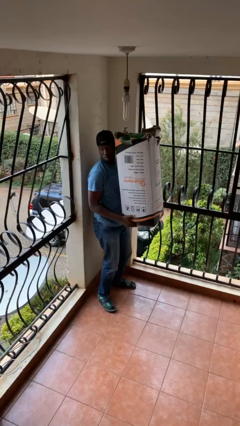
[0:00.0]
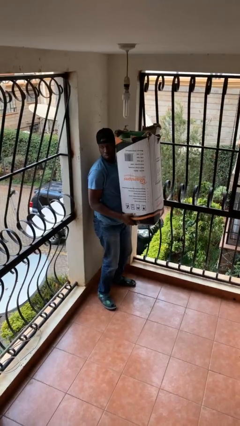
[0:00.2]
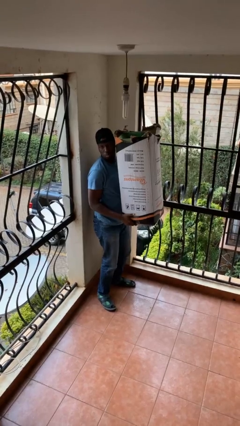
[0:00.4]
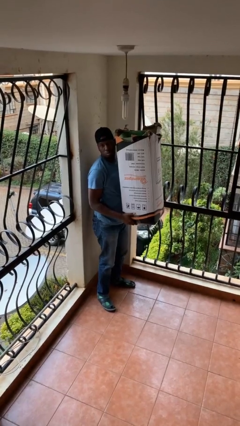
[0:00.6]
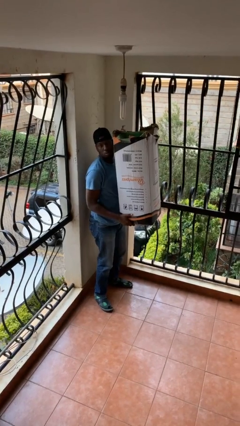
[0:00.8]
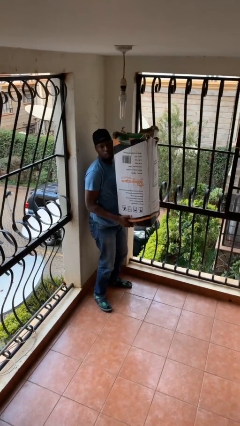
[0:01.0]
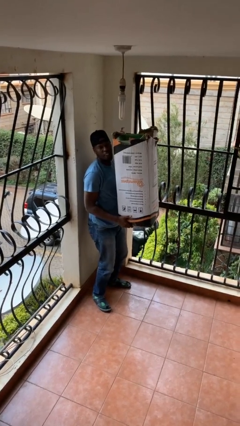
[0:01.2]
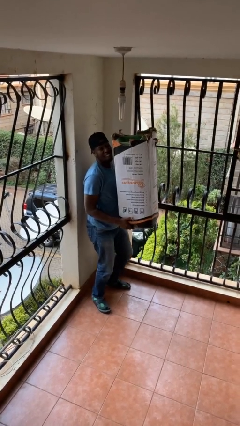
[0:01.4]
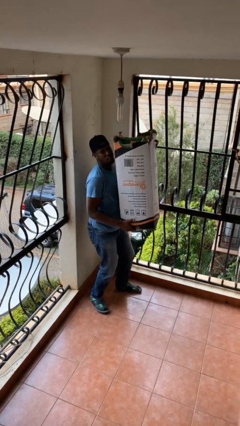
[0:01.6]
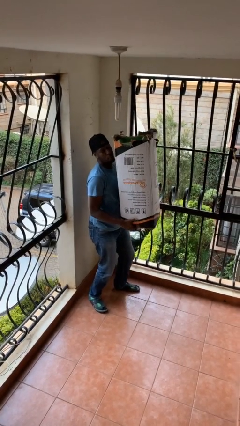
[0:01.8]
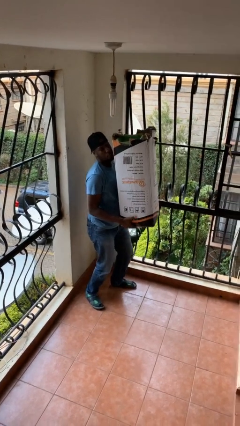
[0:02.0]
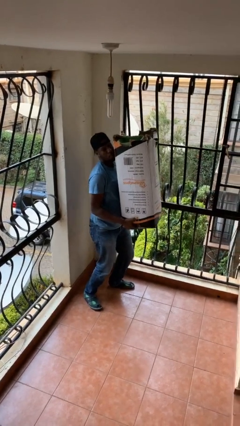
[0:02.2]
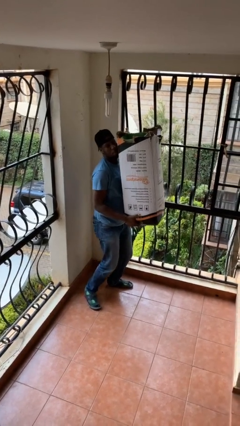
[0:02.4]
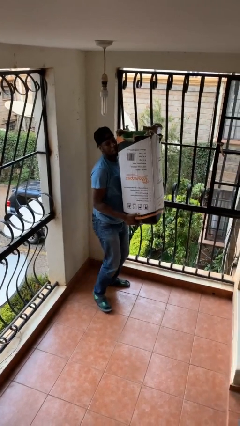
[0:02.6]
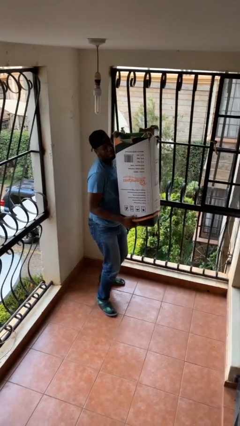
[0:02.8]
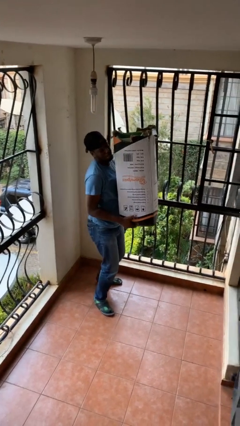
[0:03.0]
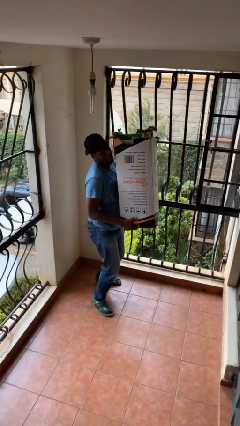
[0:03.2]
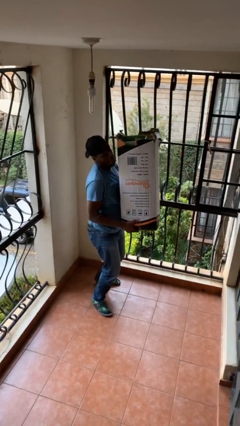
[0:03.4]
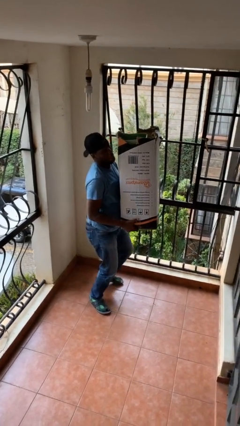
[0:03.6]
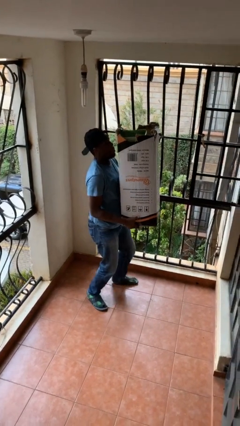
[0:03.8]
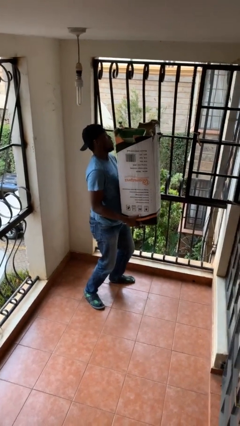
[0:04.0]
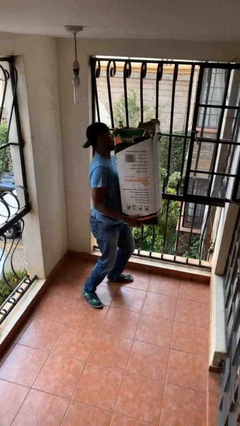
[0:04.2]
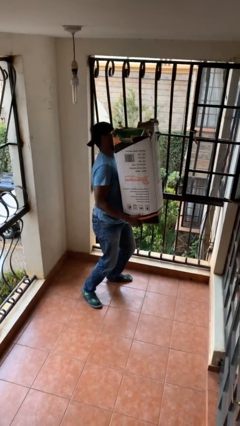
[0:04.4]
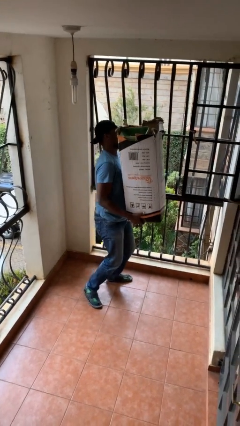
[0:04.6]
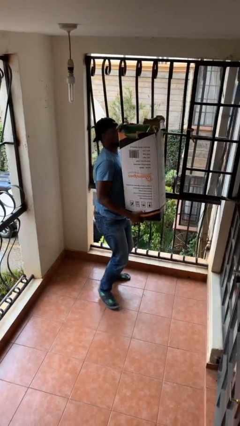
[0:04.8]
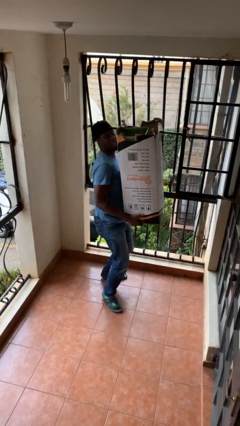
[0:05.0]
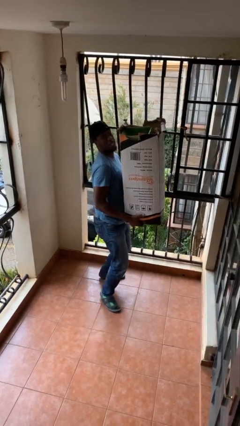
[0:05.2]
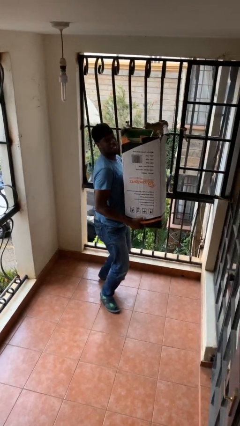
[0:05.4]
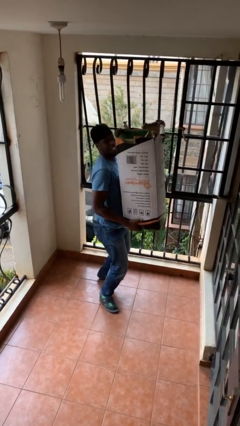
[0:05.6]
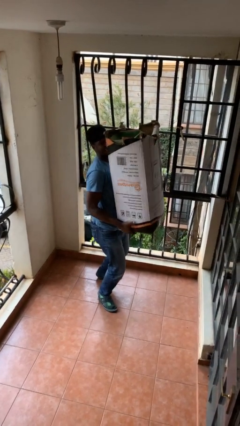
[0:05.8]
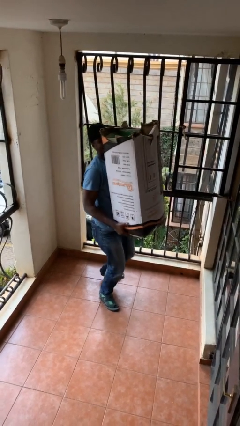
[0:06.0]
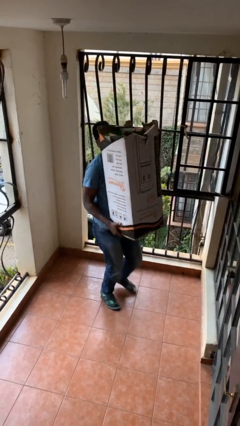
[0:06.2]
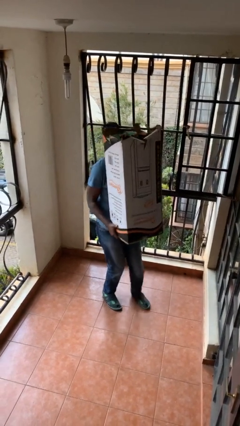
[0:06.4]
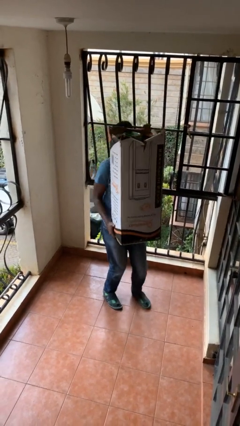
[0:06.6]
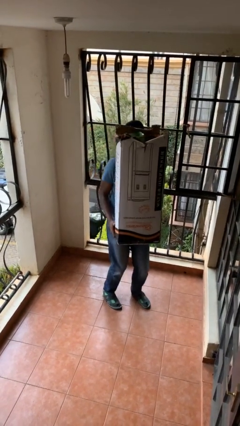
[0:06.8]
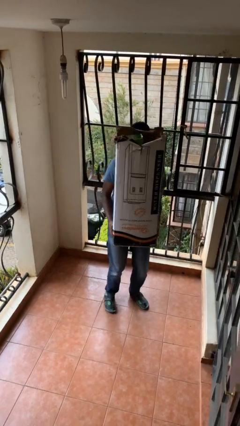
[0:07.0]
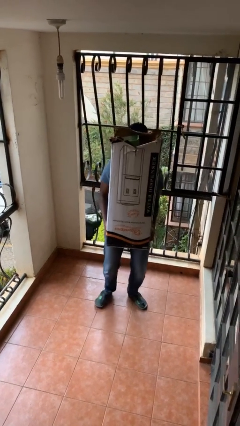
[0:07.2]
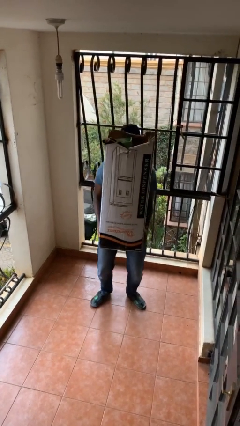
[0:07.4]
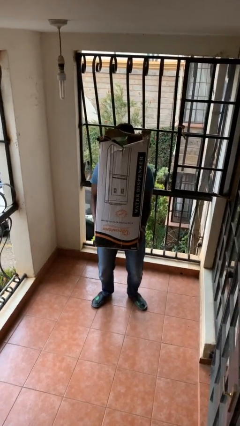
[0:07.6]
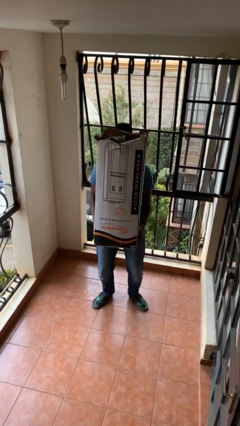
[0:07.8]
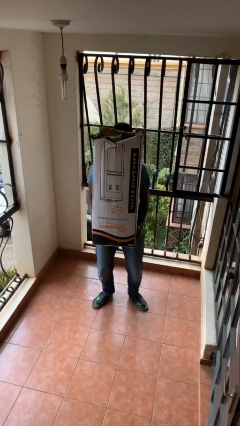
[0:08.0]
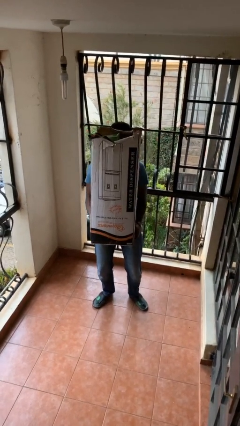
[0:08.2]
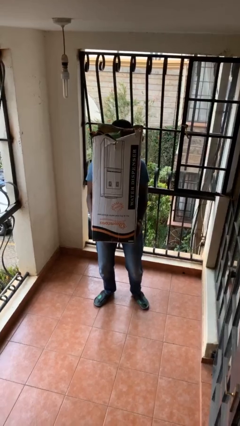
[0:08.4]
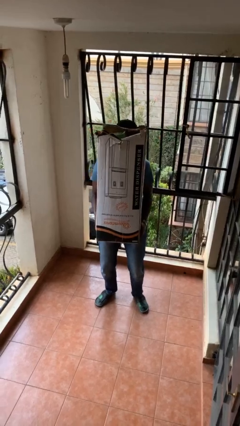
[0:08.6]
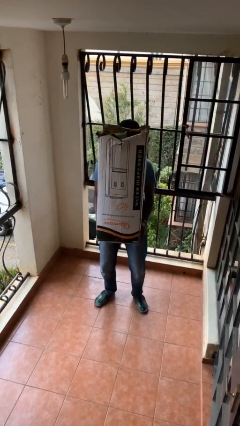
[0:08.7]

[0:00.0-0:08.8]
person carries heavy object

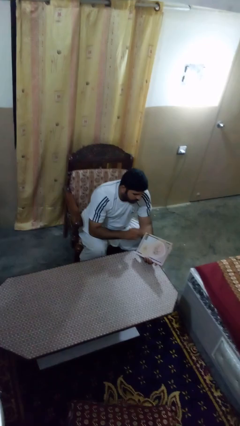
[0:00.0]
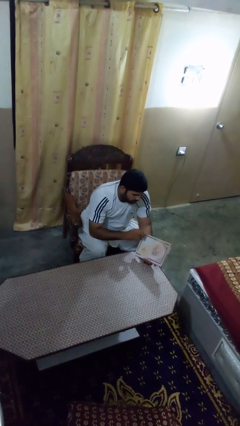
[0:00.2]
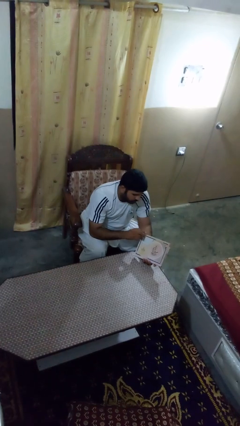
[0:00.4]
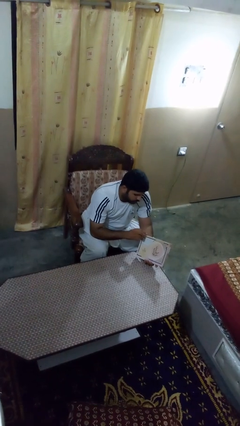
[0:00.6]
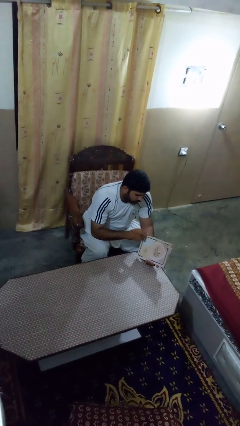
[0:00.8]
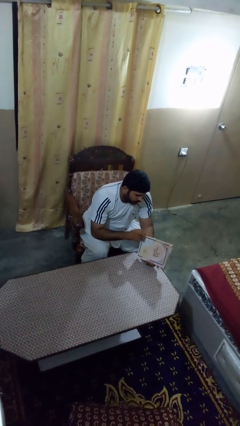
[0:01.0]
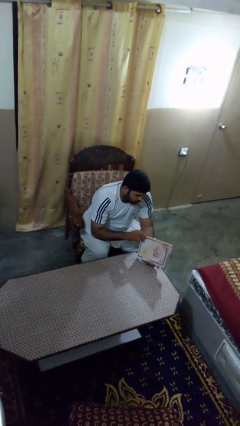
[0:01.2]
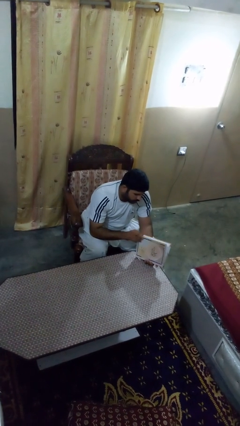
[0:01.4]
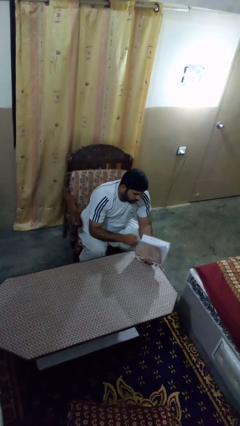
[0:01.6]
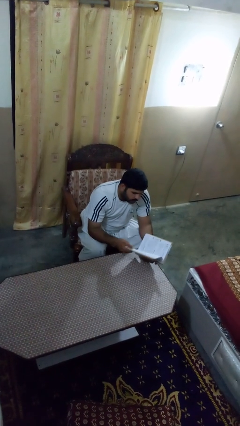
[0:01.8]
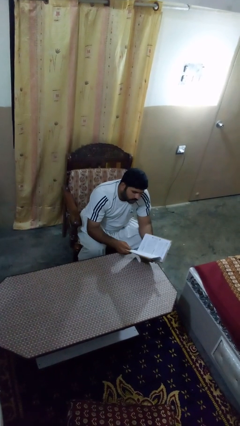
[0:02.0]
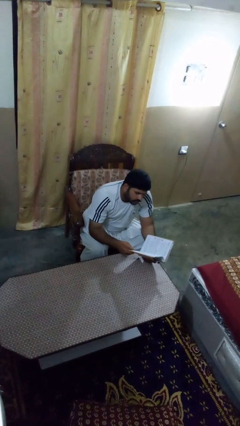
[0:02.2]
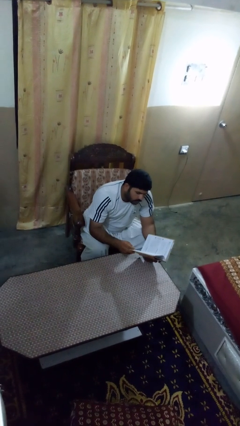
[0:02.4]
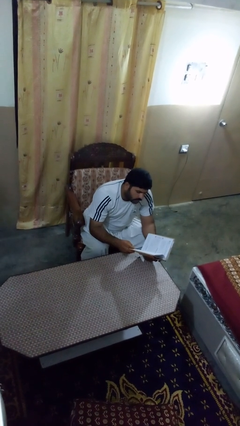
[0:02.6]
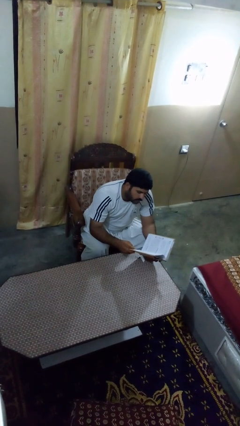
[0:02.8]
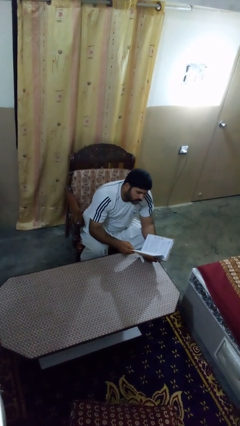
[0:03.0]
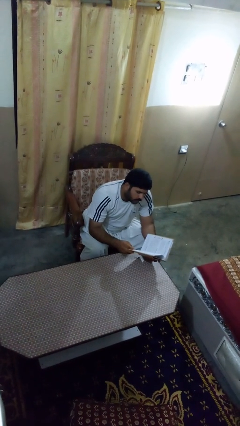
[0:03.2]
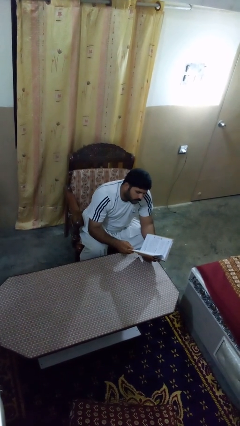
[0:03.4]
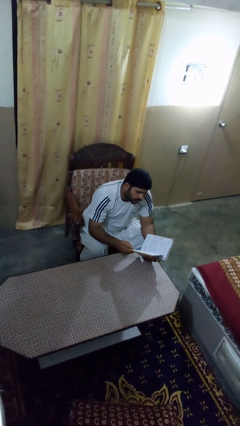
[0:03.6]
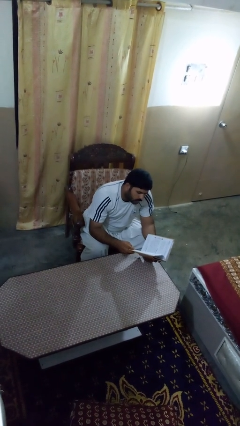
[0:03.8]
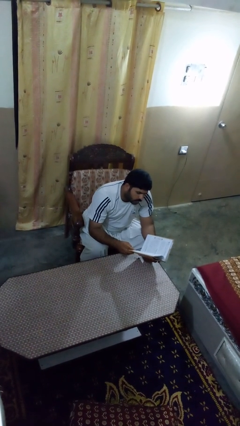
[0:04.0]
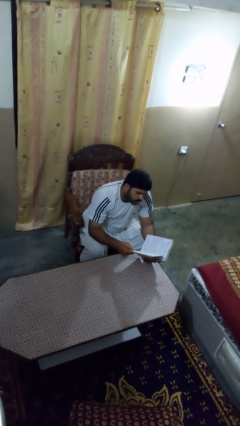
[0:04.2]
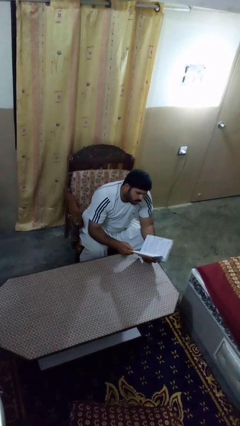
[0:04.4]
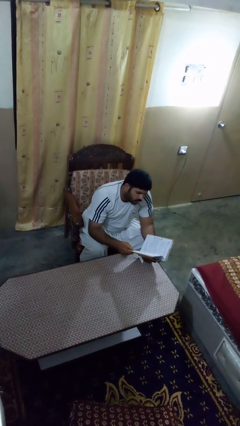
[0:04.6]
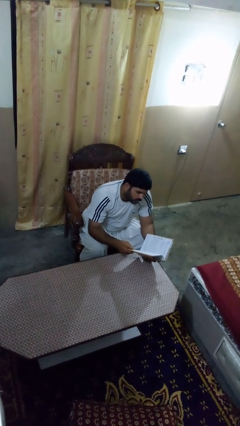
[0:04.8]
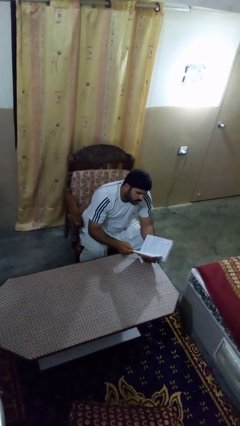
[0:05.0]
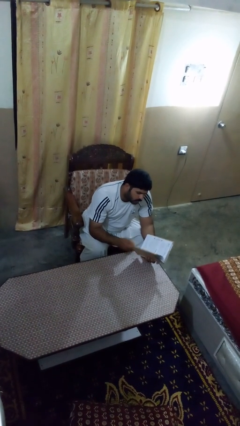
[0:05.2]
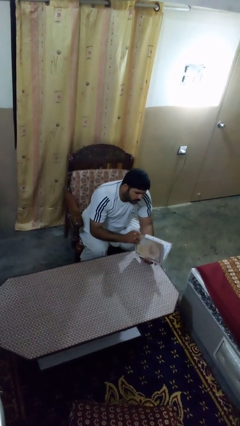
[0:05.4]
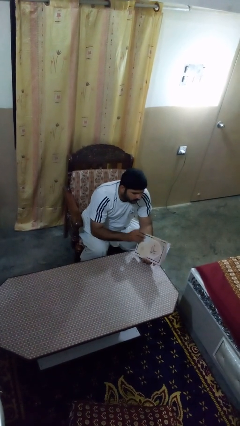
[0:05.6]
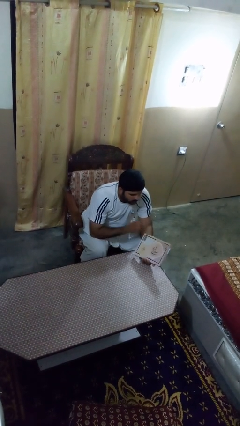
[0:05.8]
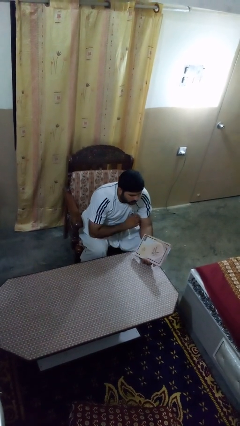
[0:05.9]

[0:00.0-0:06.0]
person reads book

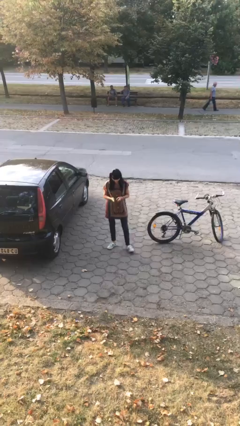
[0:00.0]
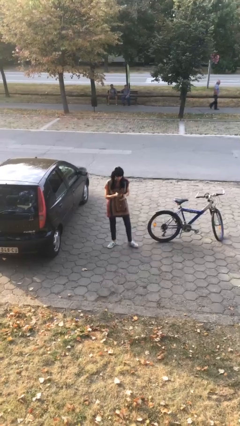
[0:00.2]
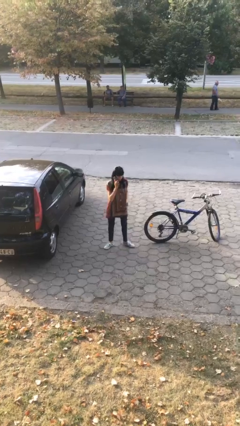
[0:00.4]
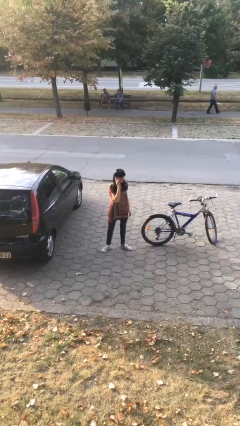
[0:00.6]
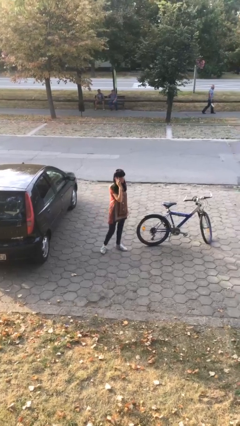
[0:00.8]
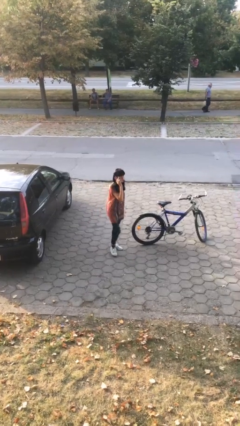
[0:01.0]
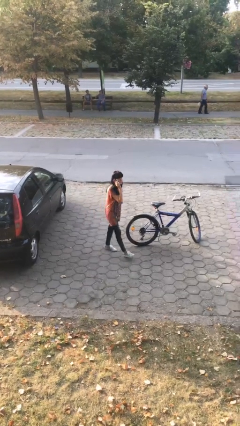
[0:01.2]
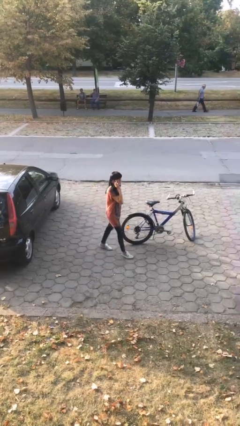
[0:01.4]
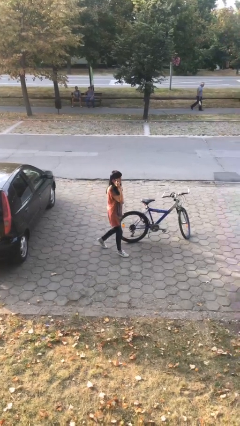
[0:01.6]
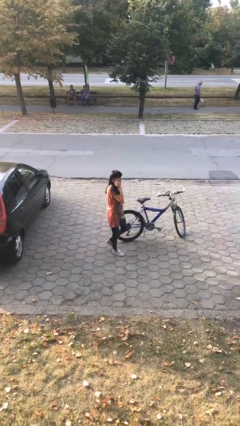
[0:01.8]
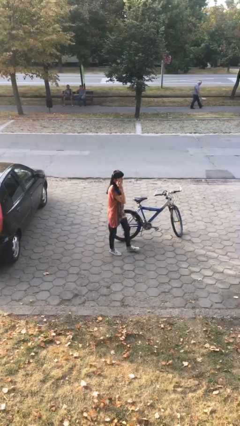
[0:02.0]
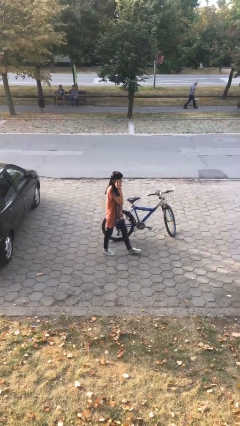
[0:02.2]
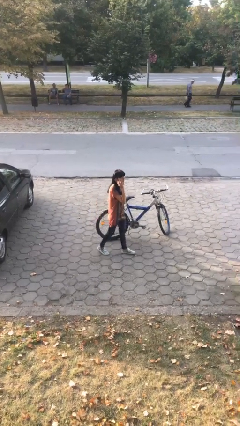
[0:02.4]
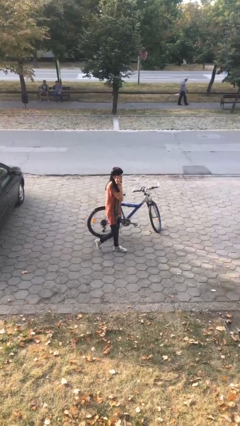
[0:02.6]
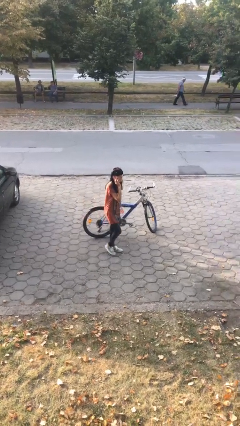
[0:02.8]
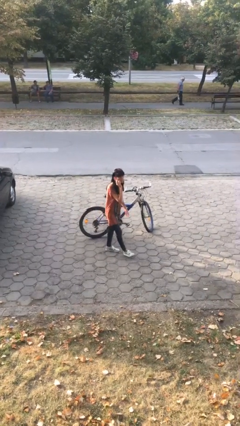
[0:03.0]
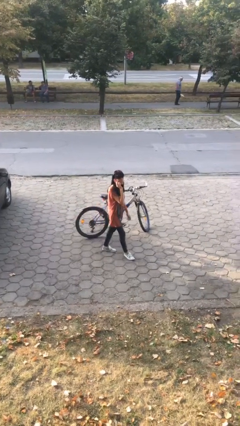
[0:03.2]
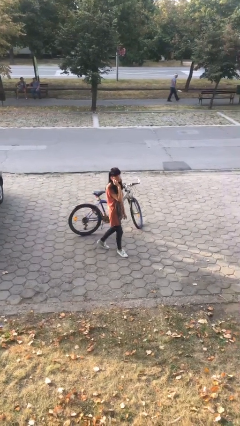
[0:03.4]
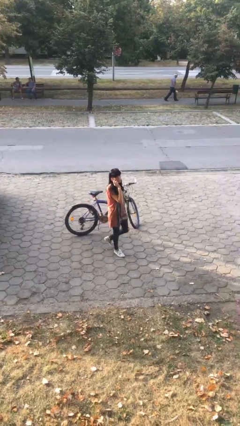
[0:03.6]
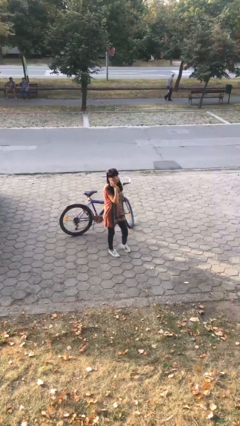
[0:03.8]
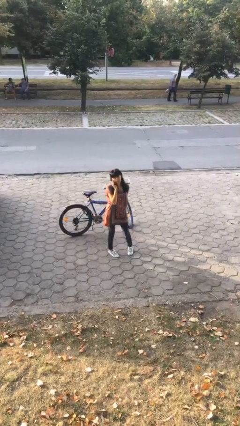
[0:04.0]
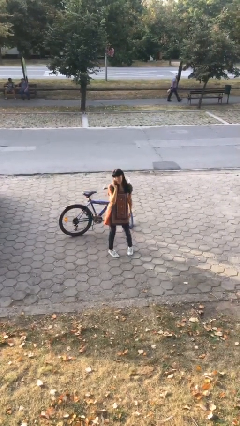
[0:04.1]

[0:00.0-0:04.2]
person talks on phone
